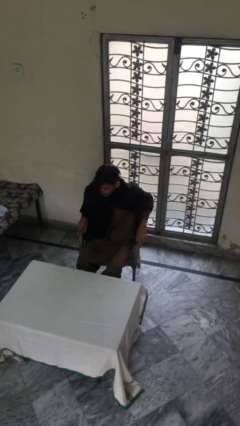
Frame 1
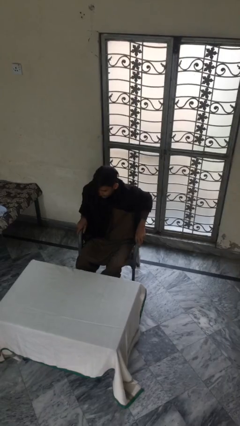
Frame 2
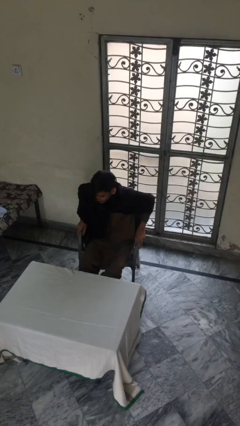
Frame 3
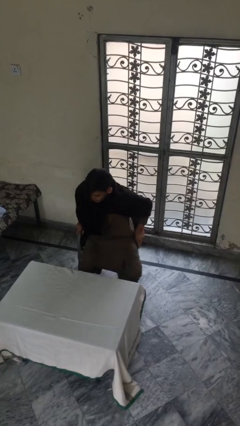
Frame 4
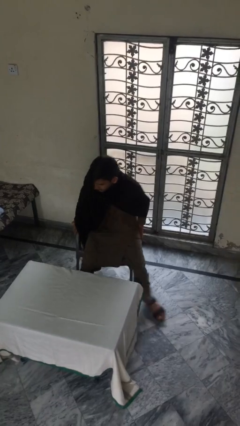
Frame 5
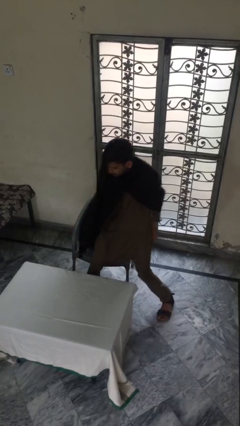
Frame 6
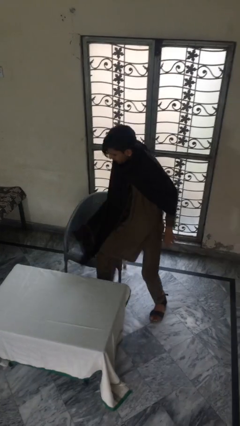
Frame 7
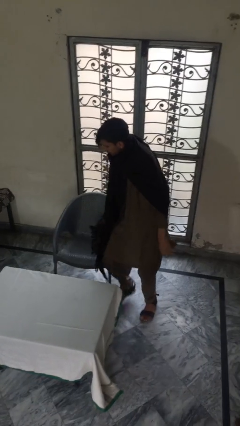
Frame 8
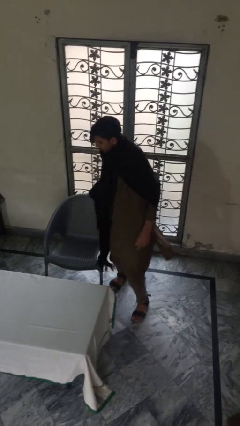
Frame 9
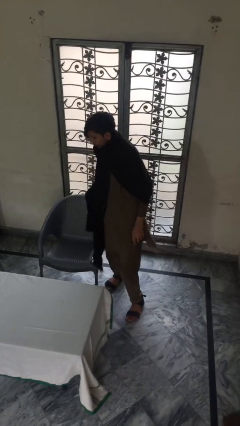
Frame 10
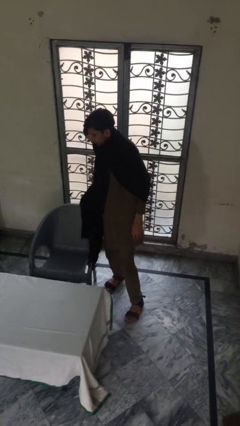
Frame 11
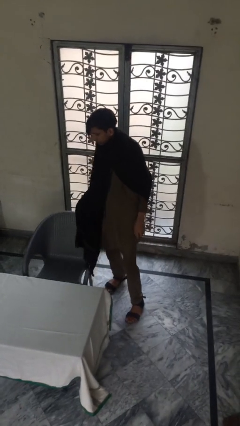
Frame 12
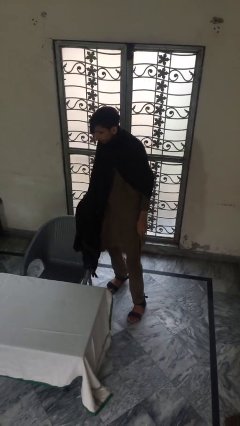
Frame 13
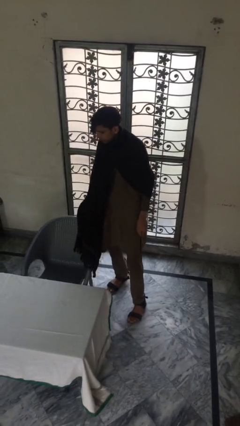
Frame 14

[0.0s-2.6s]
person stands up

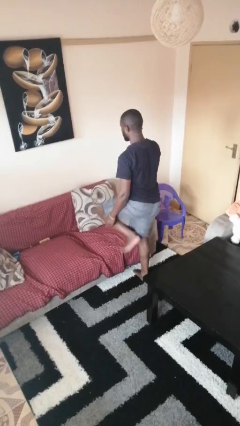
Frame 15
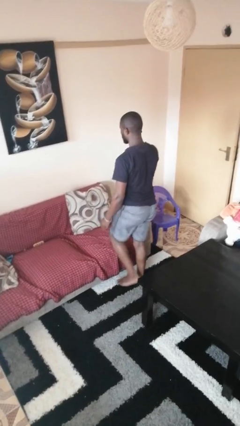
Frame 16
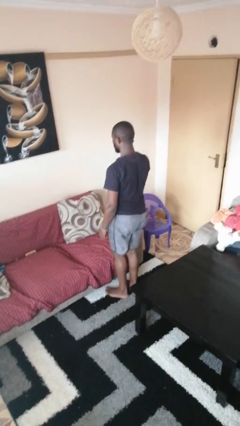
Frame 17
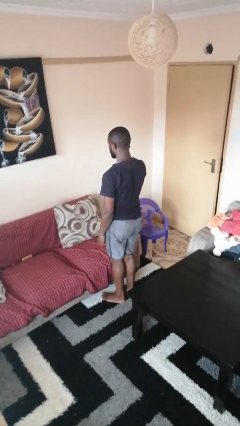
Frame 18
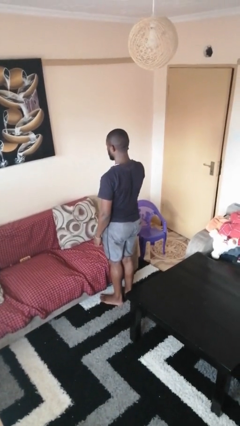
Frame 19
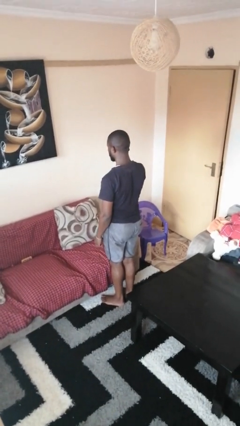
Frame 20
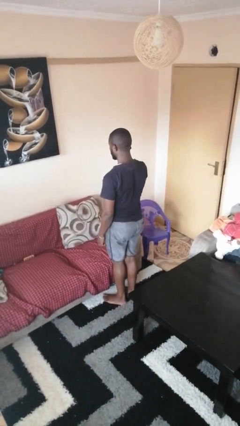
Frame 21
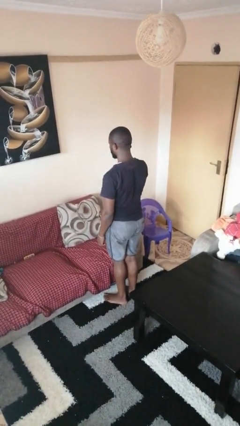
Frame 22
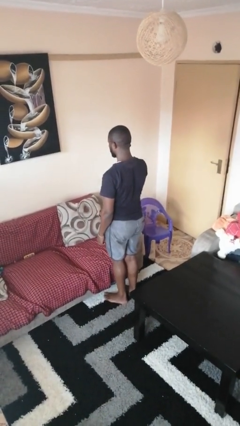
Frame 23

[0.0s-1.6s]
person climbs off couch

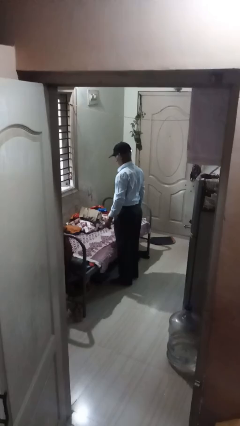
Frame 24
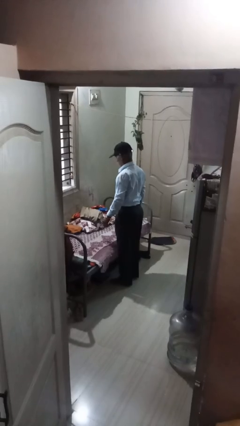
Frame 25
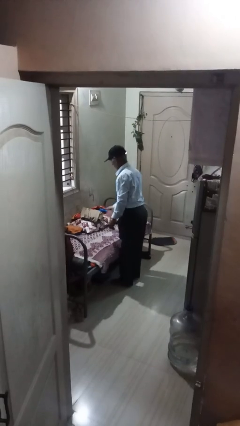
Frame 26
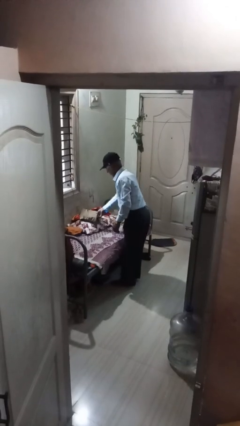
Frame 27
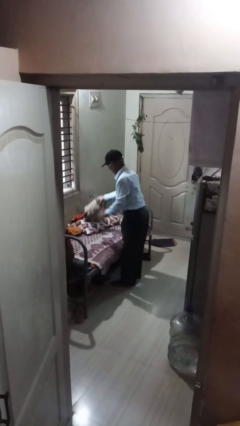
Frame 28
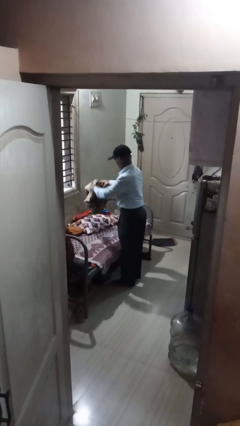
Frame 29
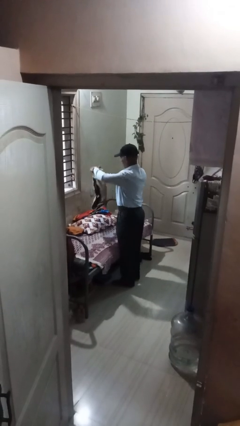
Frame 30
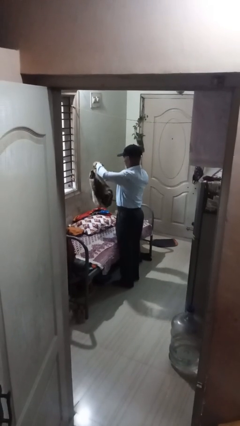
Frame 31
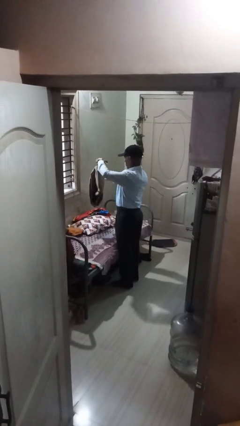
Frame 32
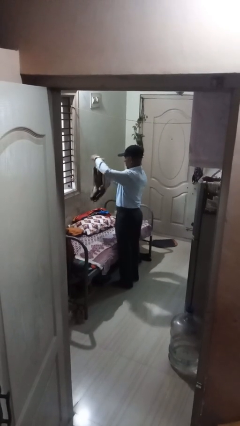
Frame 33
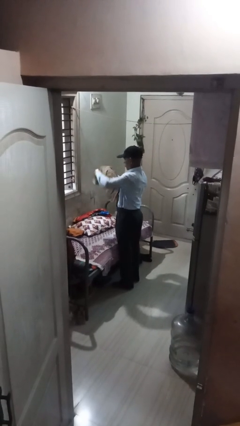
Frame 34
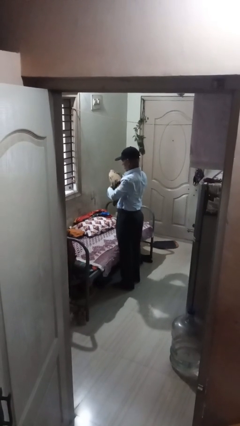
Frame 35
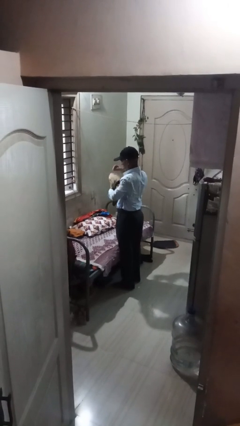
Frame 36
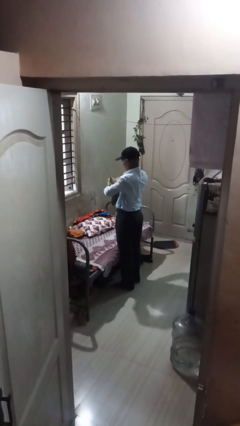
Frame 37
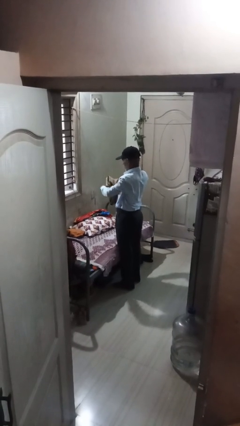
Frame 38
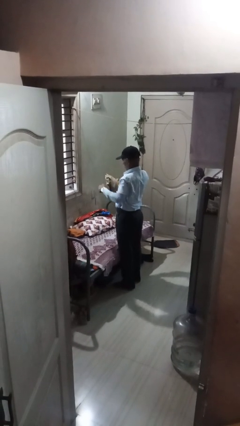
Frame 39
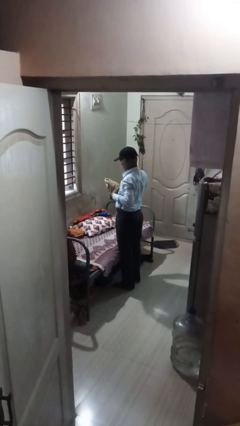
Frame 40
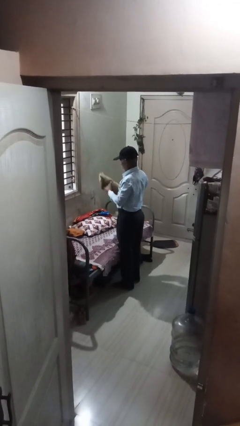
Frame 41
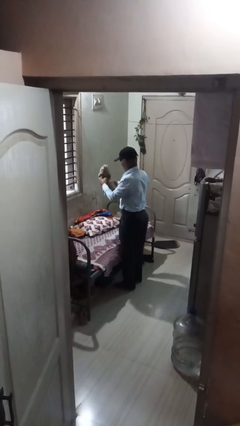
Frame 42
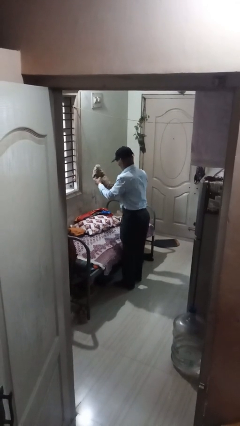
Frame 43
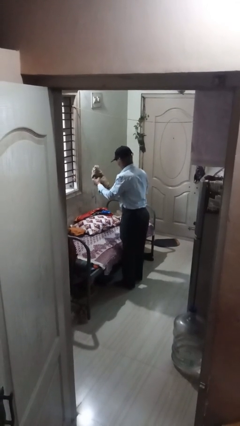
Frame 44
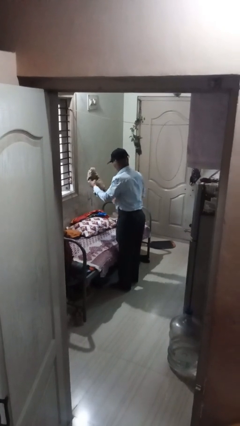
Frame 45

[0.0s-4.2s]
person folds pants

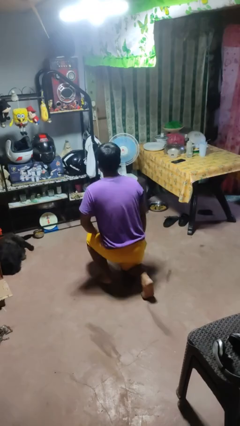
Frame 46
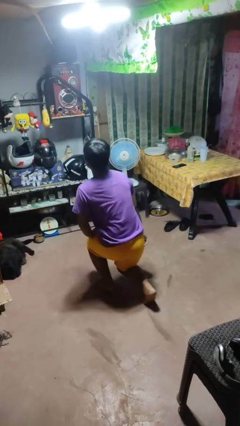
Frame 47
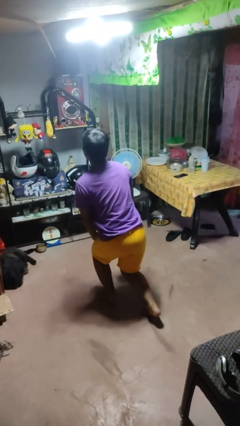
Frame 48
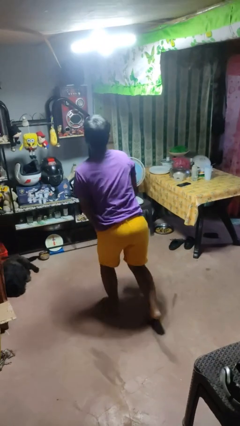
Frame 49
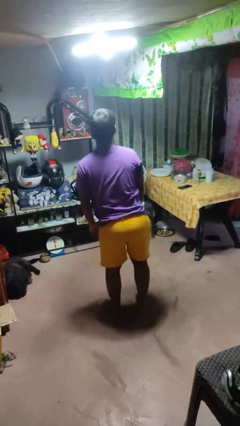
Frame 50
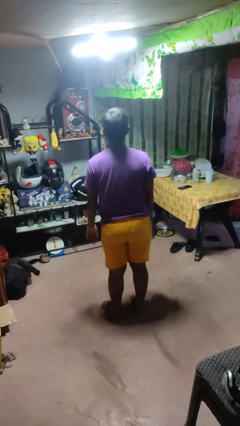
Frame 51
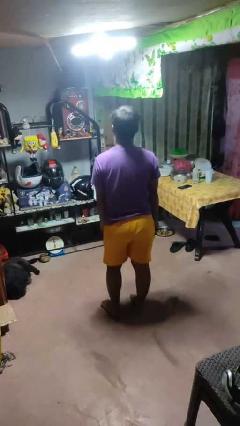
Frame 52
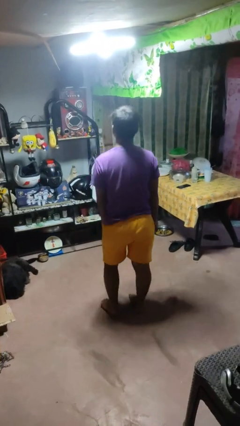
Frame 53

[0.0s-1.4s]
person stands up from floor

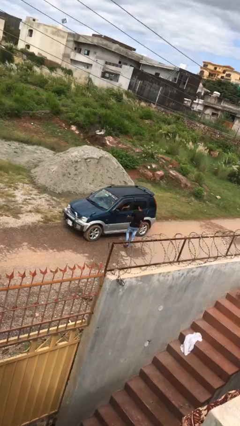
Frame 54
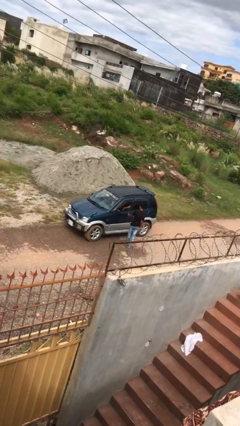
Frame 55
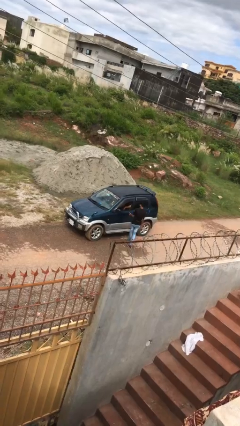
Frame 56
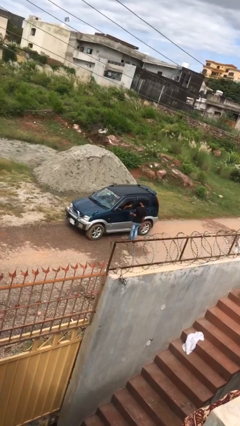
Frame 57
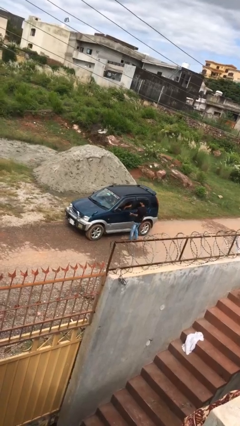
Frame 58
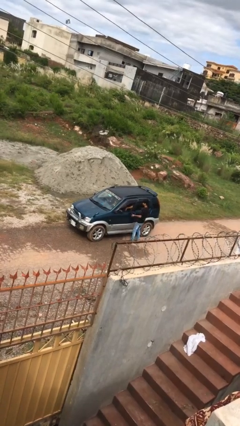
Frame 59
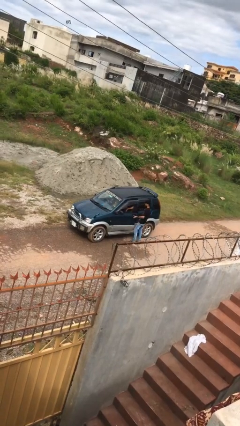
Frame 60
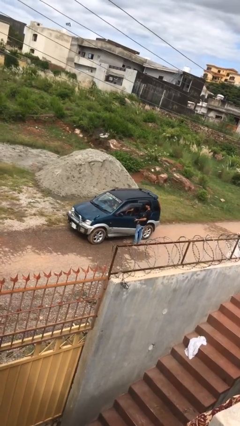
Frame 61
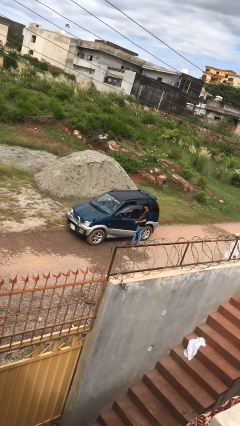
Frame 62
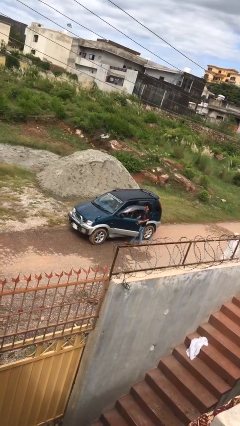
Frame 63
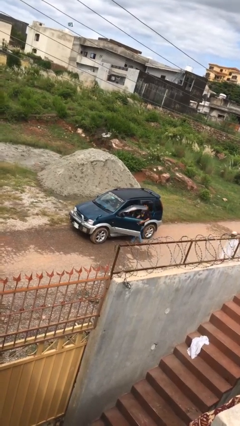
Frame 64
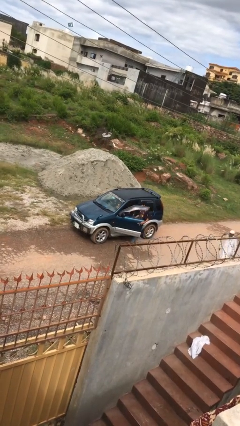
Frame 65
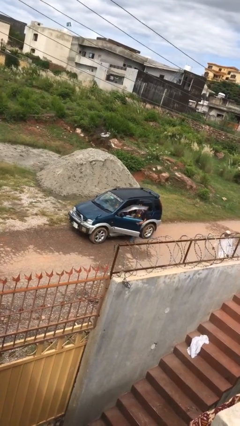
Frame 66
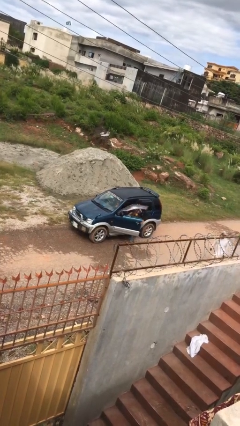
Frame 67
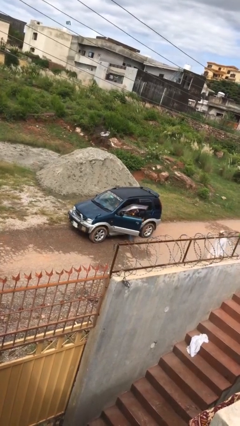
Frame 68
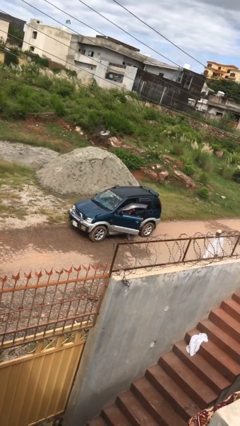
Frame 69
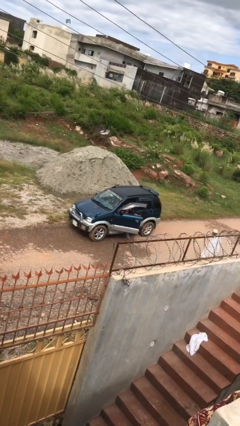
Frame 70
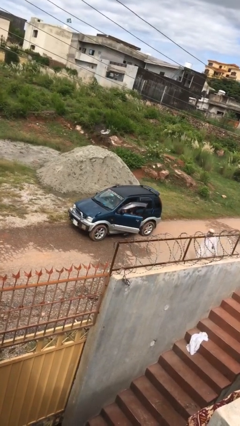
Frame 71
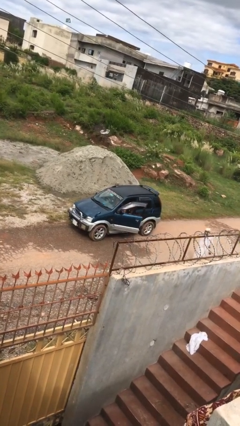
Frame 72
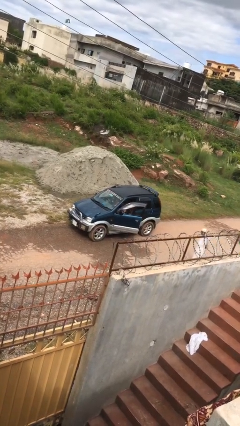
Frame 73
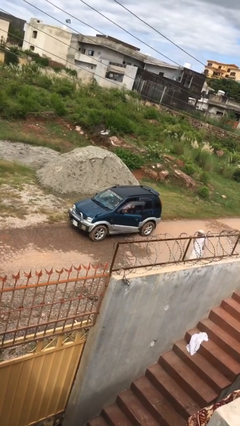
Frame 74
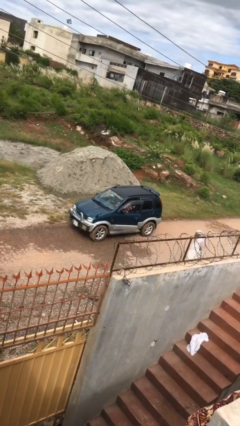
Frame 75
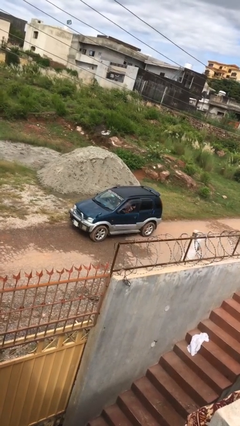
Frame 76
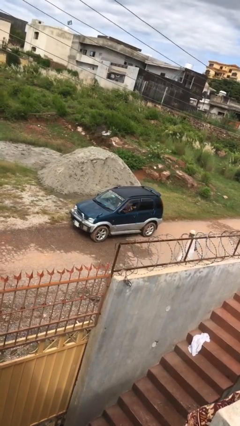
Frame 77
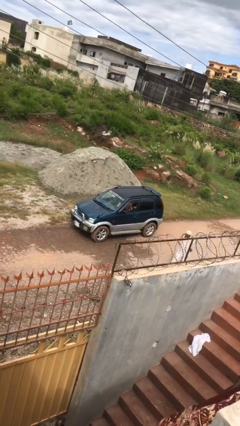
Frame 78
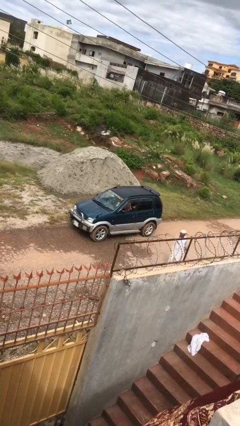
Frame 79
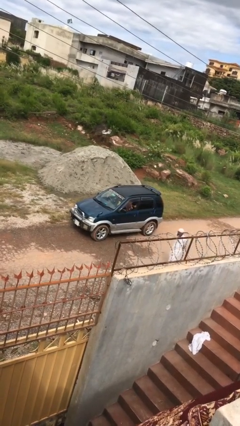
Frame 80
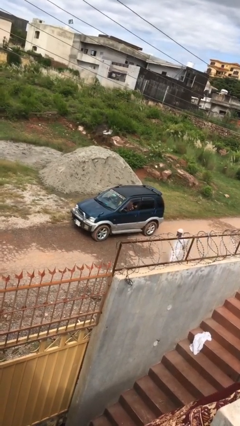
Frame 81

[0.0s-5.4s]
car picks up person

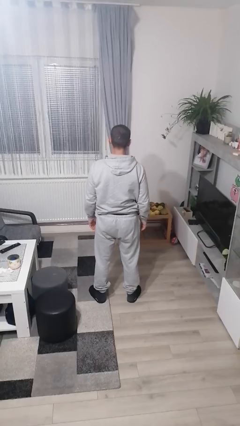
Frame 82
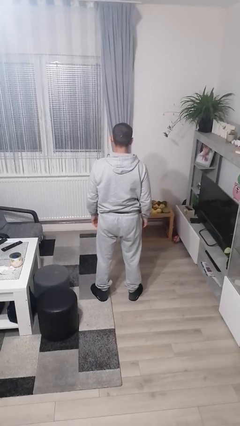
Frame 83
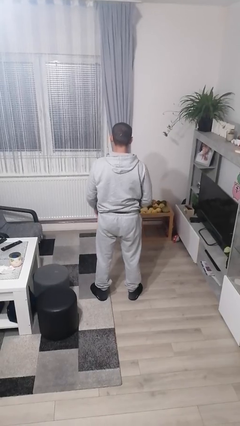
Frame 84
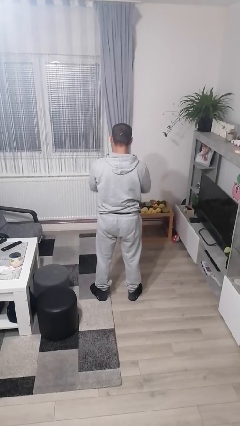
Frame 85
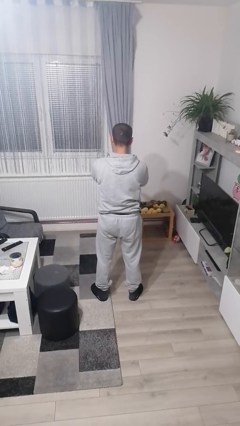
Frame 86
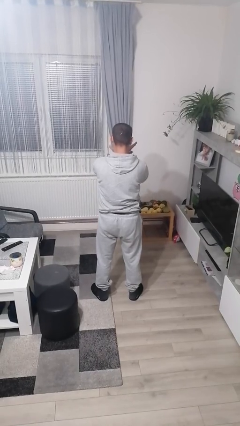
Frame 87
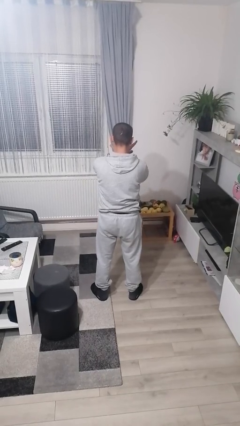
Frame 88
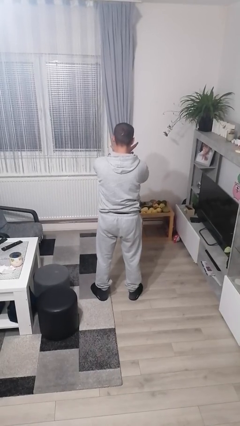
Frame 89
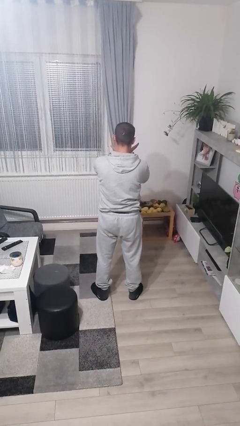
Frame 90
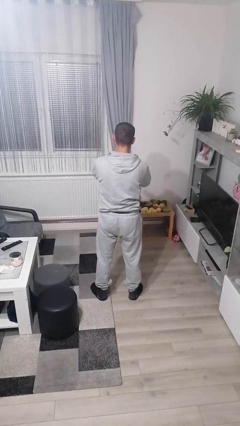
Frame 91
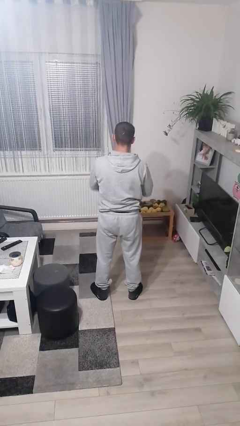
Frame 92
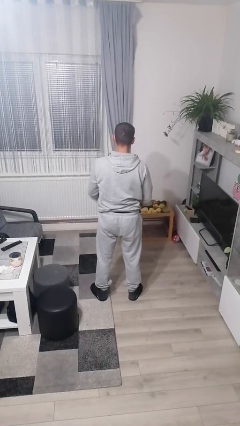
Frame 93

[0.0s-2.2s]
person gestures arms x
